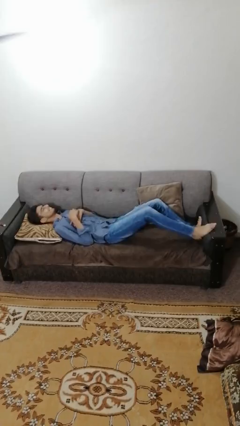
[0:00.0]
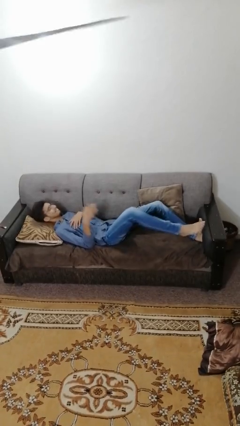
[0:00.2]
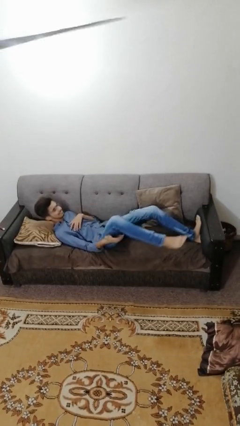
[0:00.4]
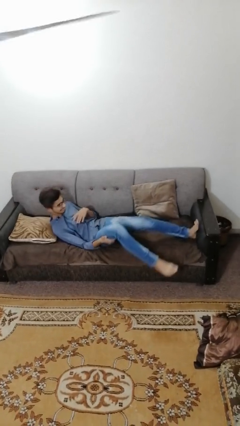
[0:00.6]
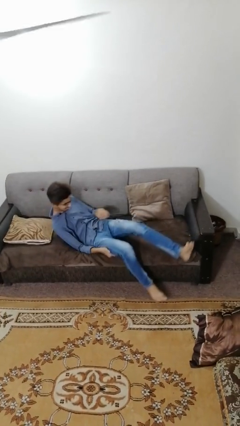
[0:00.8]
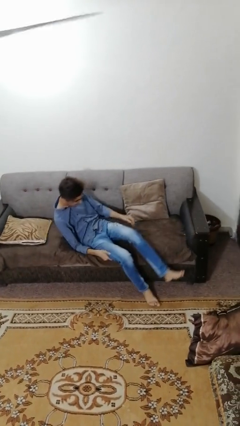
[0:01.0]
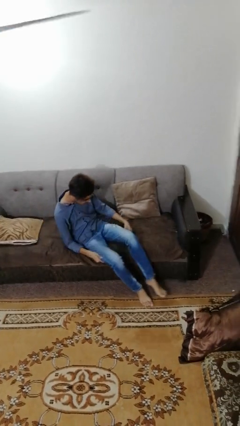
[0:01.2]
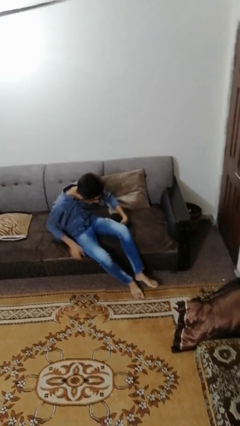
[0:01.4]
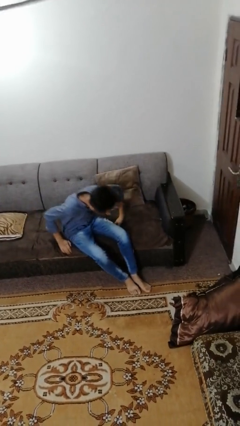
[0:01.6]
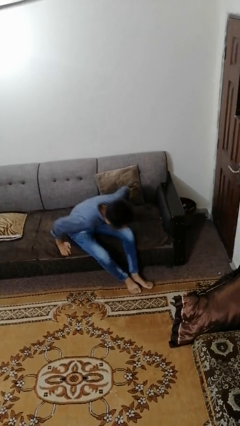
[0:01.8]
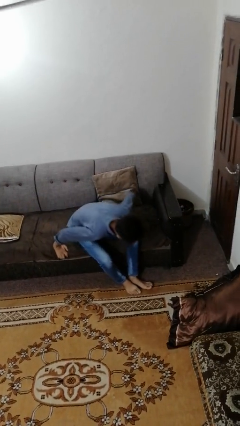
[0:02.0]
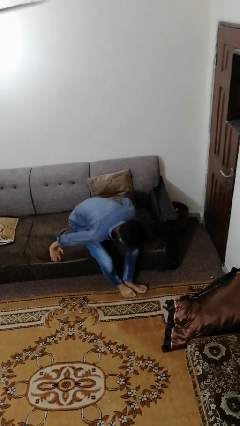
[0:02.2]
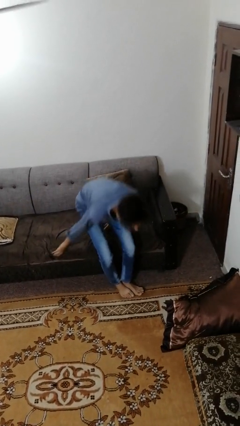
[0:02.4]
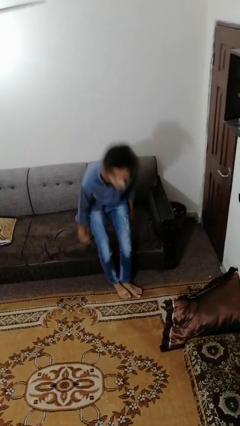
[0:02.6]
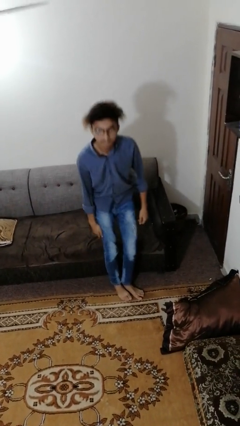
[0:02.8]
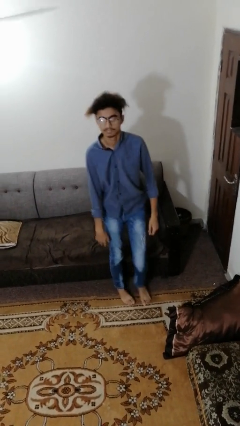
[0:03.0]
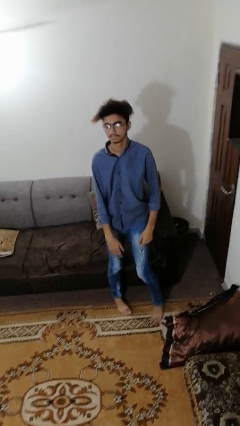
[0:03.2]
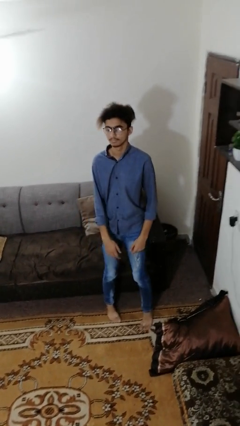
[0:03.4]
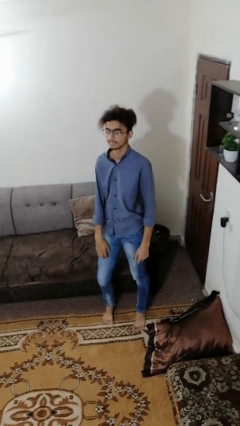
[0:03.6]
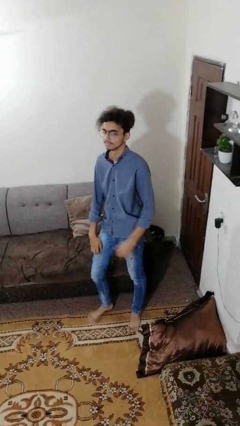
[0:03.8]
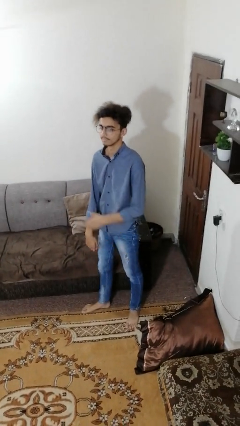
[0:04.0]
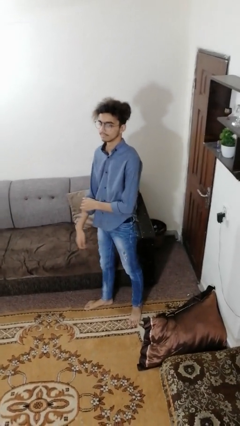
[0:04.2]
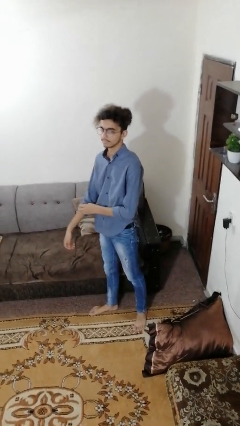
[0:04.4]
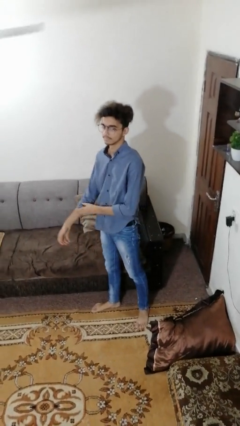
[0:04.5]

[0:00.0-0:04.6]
person stands up

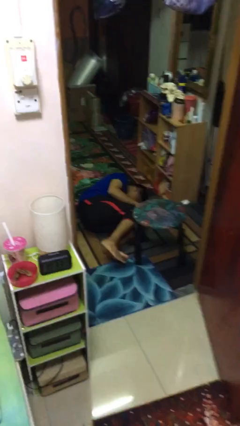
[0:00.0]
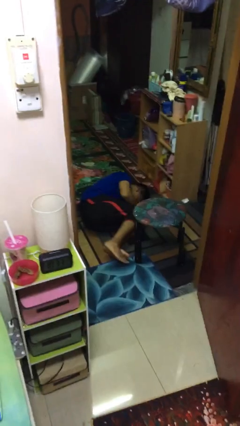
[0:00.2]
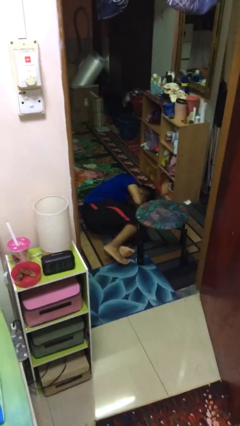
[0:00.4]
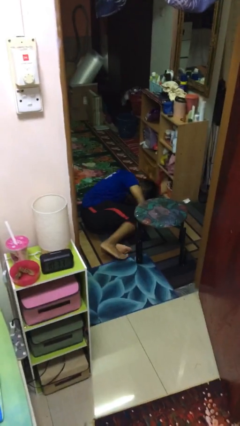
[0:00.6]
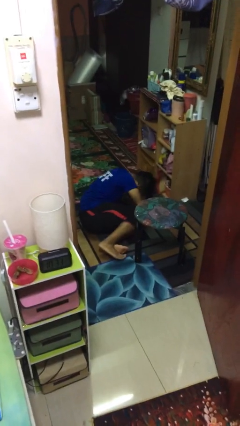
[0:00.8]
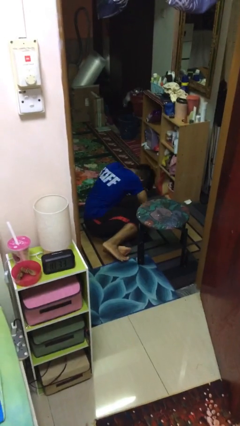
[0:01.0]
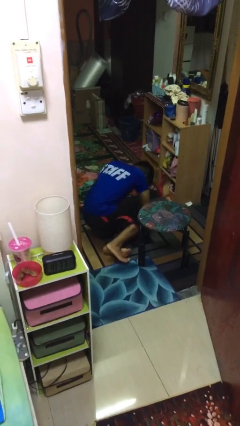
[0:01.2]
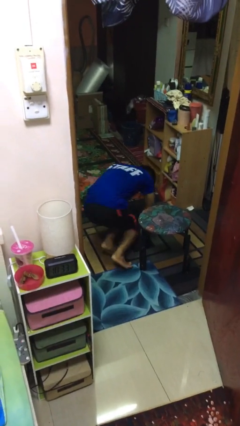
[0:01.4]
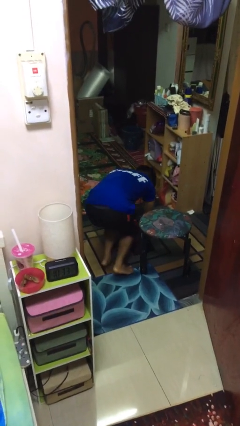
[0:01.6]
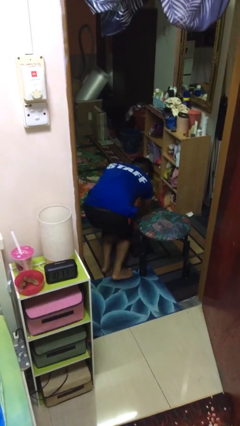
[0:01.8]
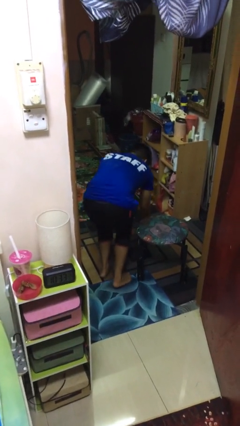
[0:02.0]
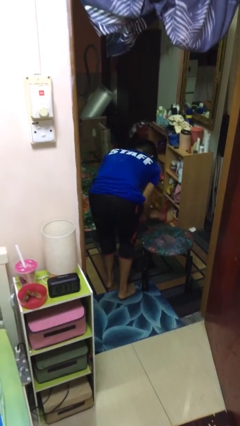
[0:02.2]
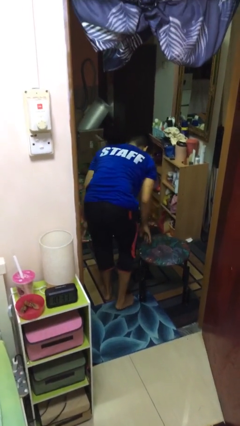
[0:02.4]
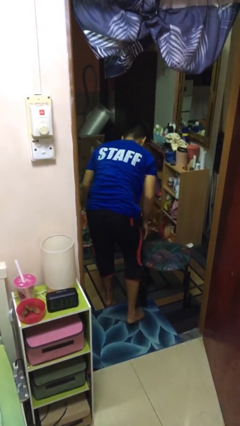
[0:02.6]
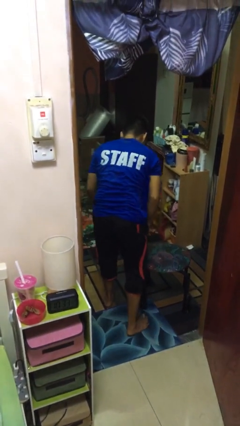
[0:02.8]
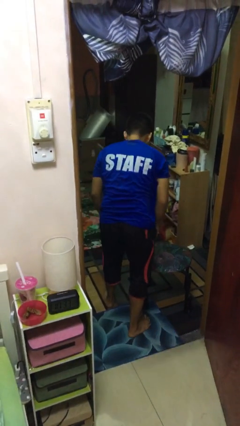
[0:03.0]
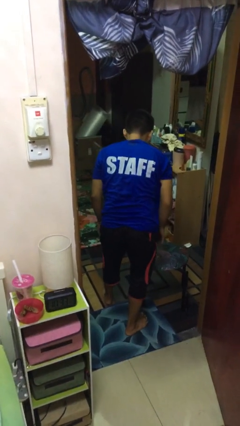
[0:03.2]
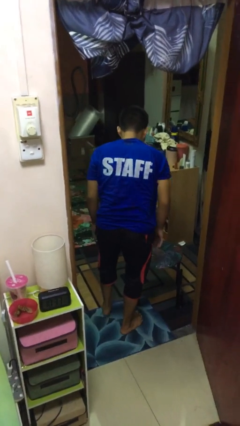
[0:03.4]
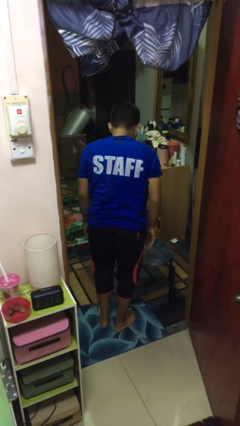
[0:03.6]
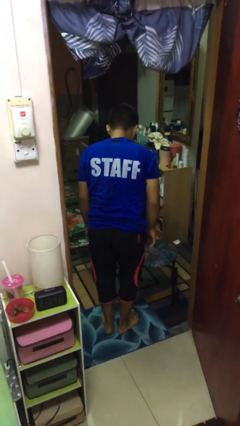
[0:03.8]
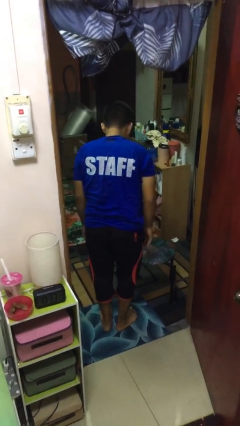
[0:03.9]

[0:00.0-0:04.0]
person stands up from floor

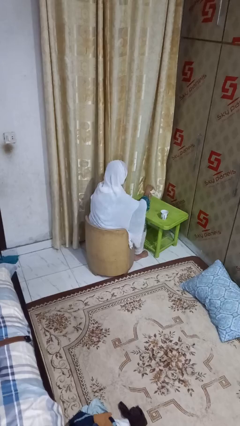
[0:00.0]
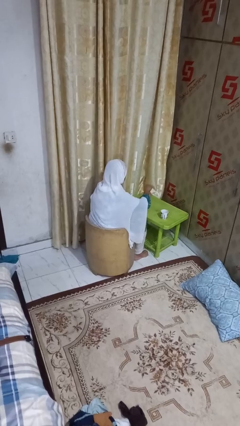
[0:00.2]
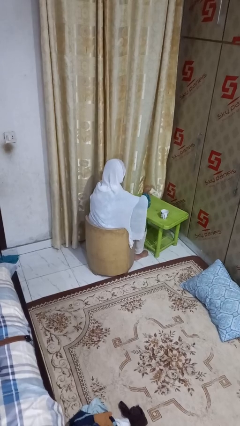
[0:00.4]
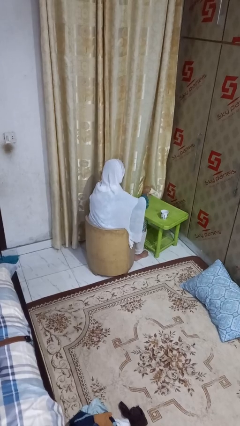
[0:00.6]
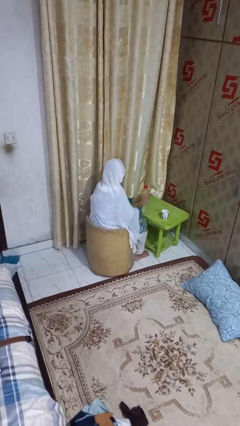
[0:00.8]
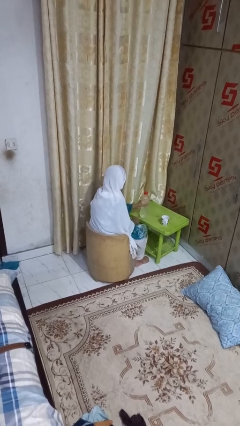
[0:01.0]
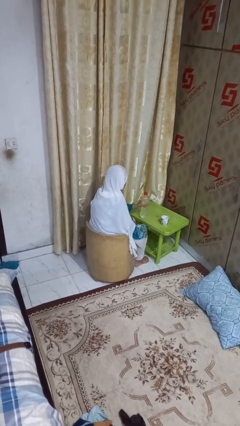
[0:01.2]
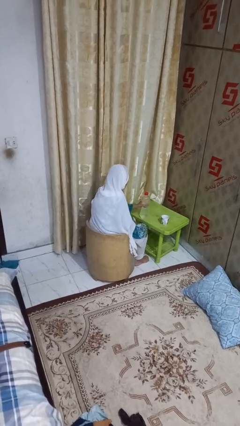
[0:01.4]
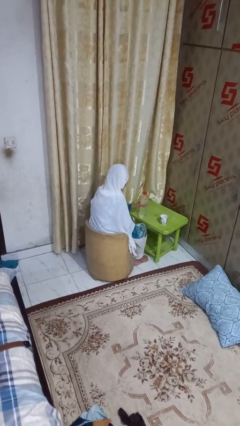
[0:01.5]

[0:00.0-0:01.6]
person screws lid to bottle

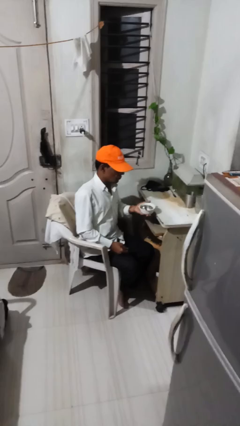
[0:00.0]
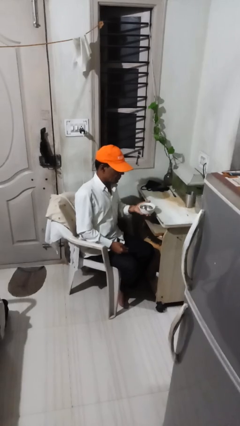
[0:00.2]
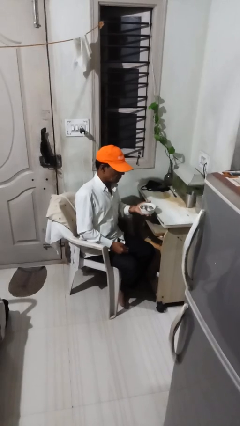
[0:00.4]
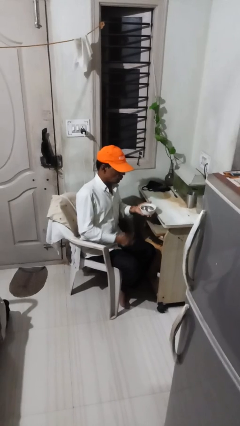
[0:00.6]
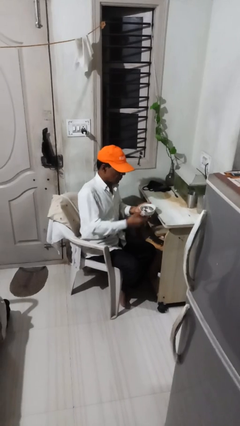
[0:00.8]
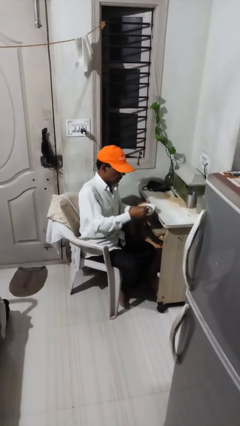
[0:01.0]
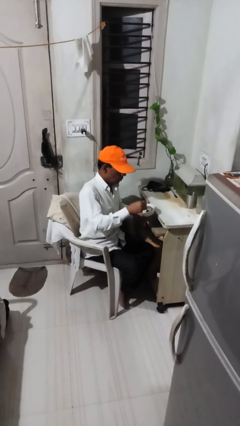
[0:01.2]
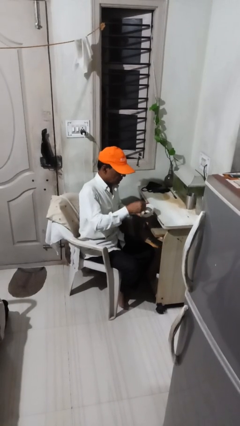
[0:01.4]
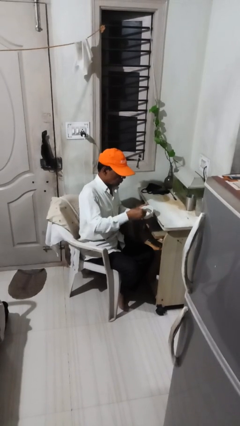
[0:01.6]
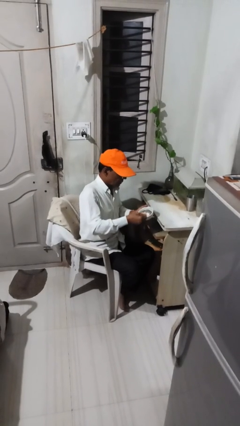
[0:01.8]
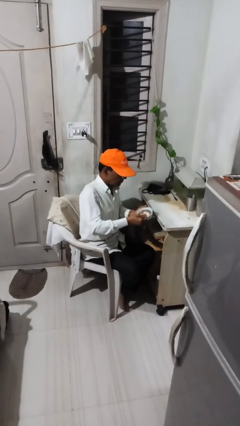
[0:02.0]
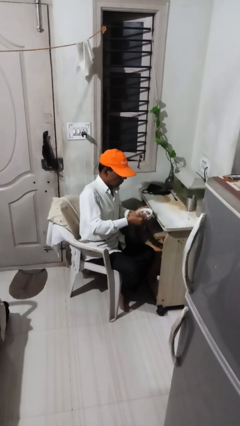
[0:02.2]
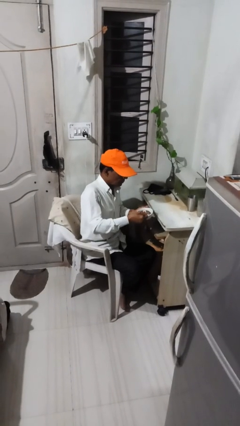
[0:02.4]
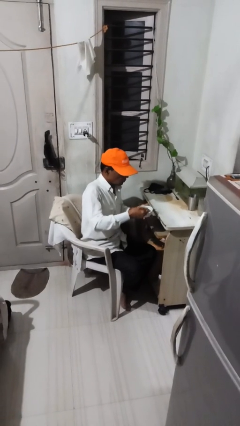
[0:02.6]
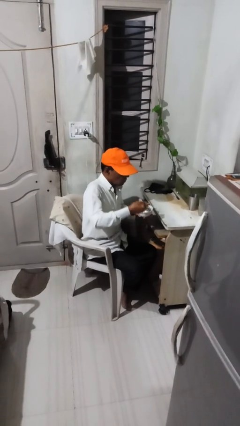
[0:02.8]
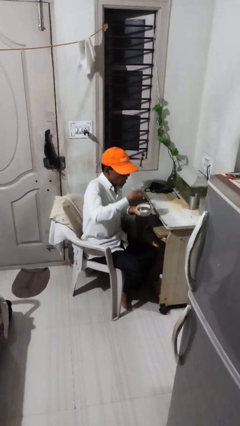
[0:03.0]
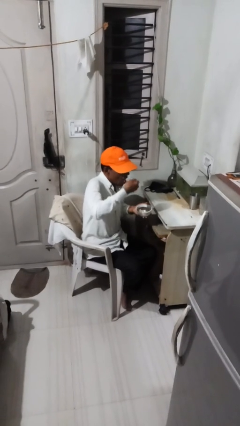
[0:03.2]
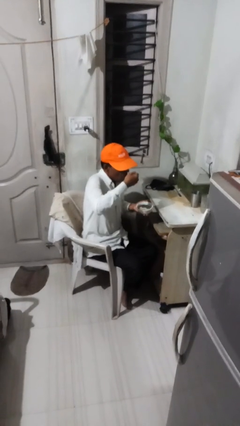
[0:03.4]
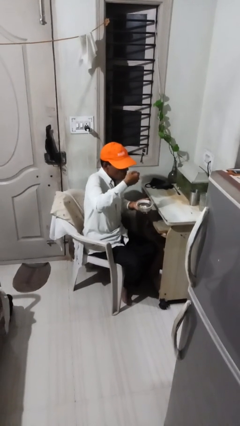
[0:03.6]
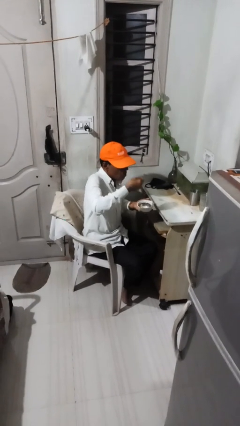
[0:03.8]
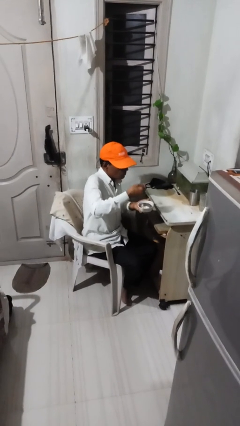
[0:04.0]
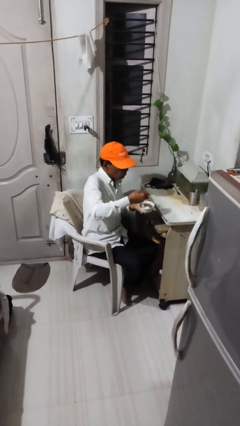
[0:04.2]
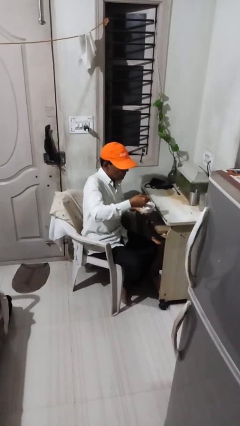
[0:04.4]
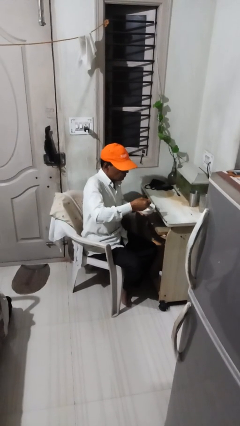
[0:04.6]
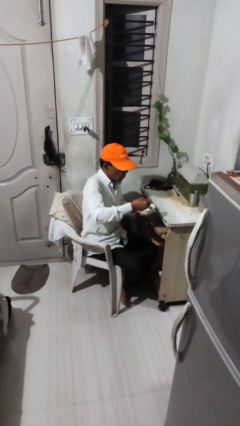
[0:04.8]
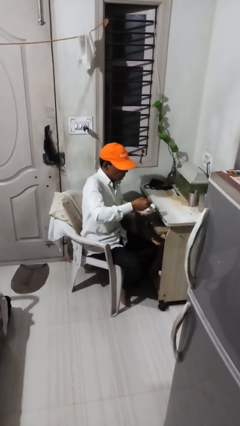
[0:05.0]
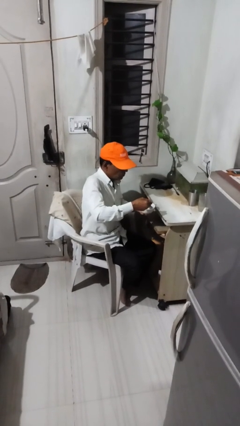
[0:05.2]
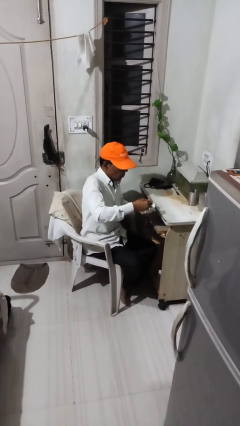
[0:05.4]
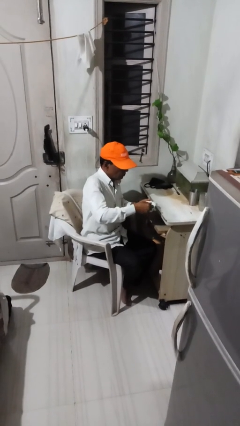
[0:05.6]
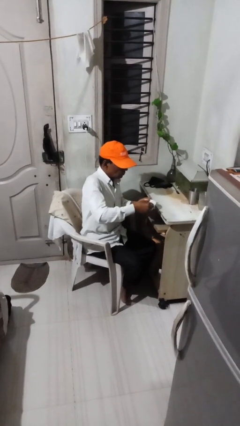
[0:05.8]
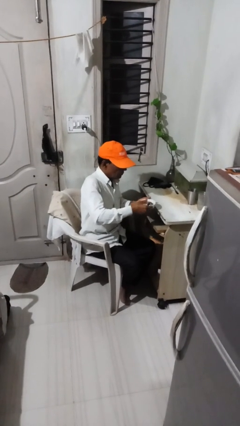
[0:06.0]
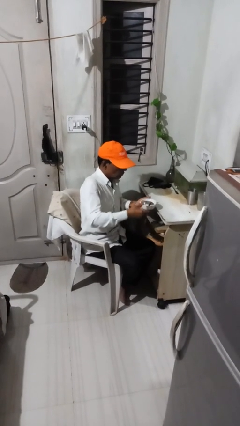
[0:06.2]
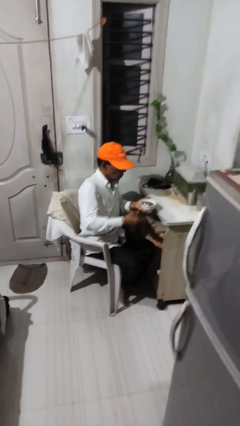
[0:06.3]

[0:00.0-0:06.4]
person eats with utensil

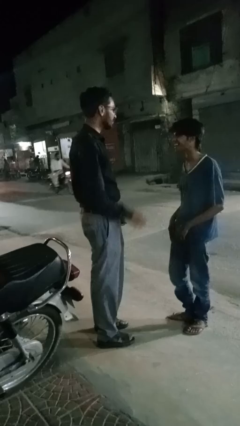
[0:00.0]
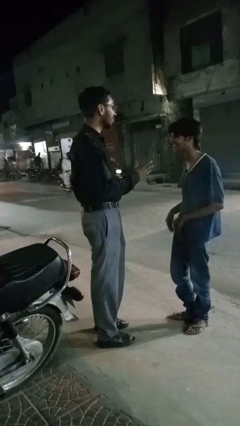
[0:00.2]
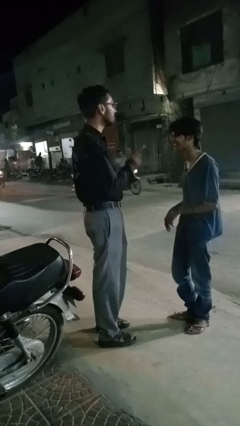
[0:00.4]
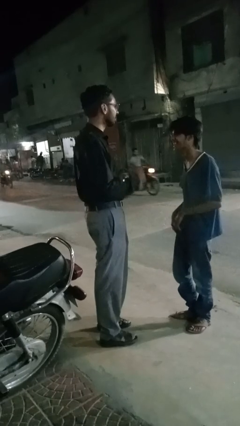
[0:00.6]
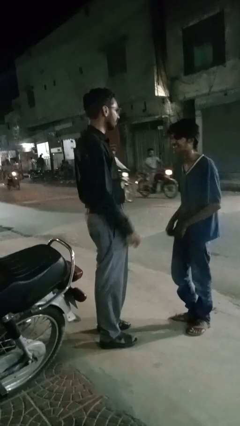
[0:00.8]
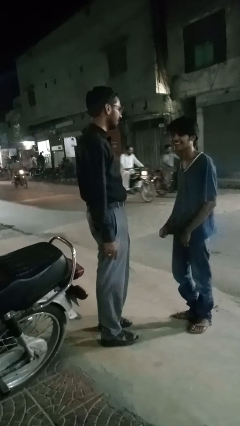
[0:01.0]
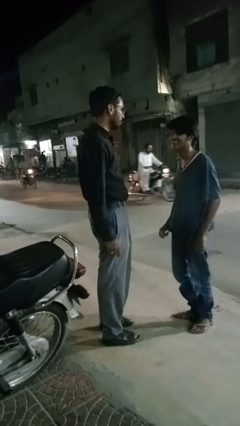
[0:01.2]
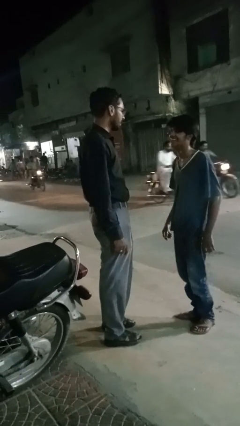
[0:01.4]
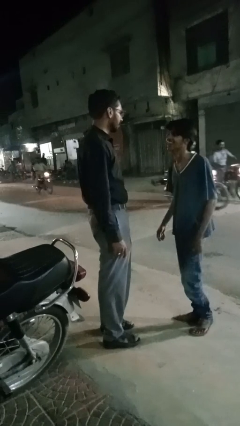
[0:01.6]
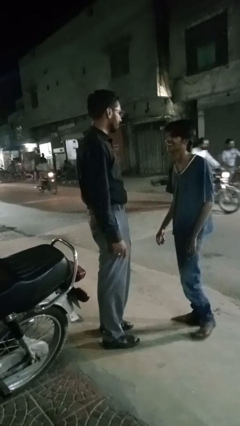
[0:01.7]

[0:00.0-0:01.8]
person talks to person
